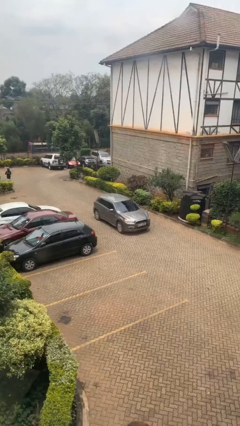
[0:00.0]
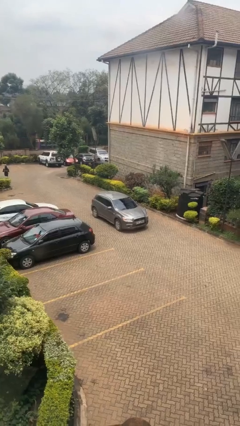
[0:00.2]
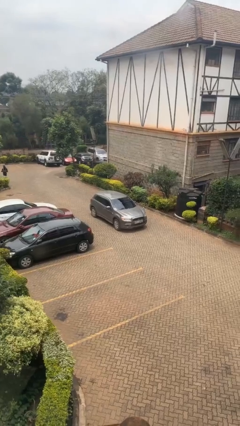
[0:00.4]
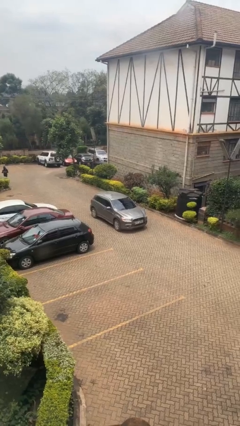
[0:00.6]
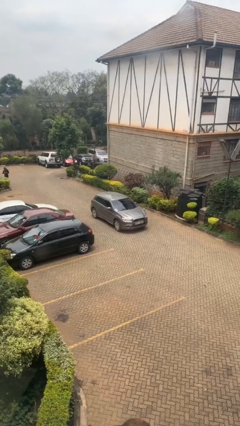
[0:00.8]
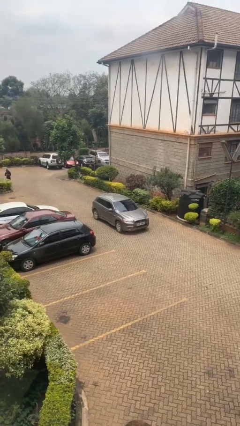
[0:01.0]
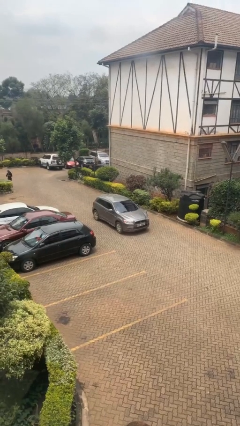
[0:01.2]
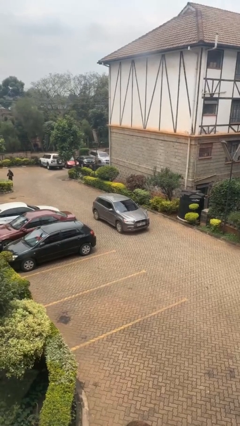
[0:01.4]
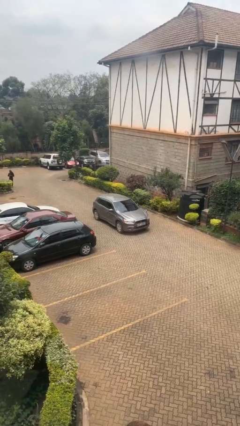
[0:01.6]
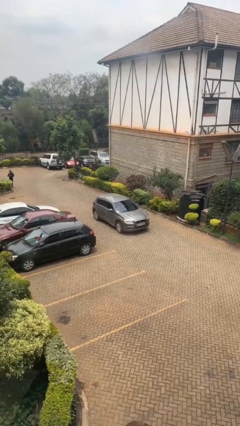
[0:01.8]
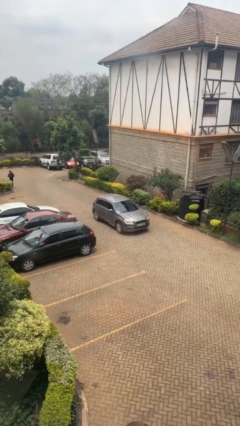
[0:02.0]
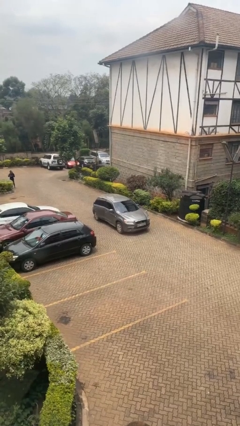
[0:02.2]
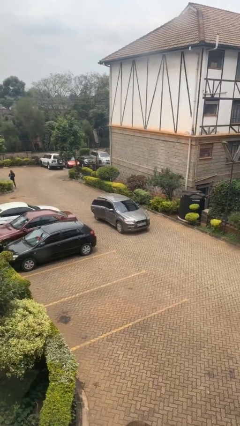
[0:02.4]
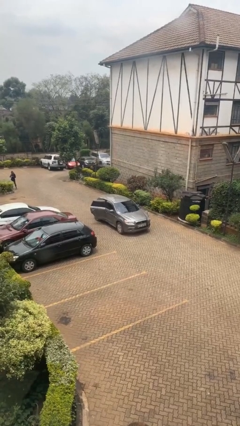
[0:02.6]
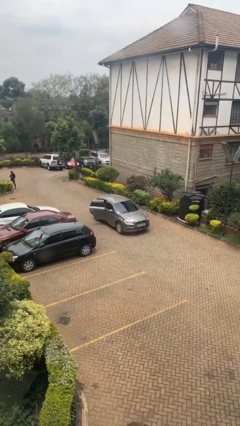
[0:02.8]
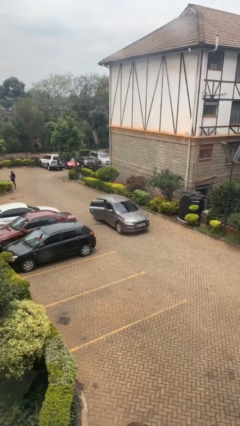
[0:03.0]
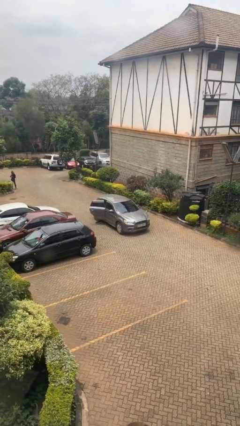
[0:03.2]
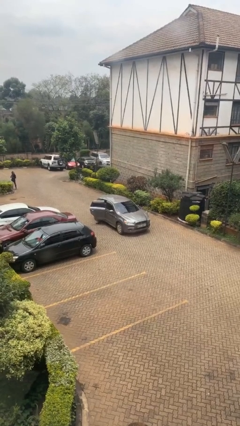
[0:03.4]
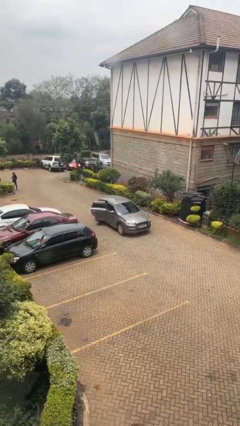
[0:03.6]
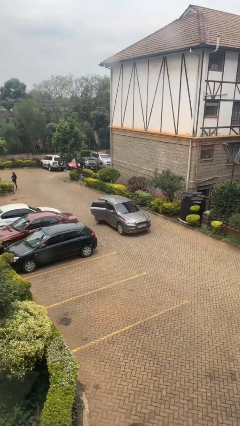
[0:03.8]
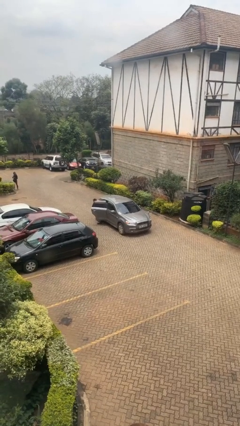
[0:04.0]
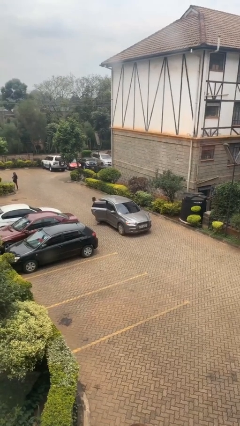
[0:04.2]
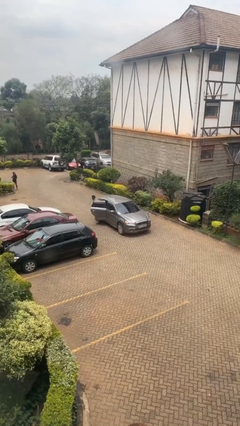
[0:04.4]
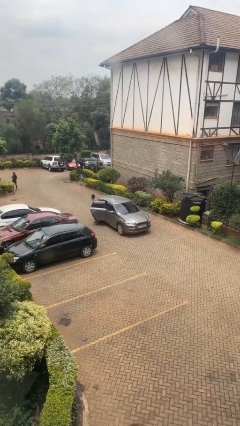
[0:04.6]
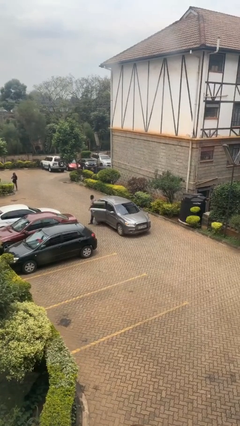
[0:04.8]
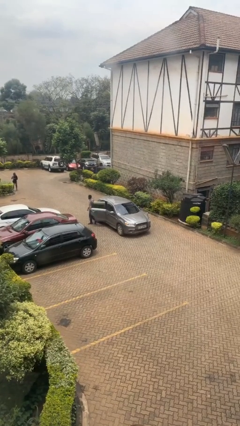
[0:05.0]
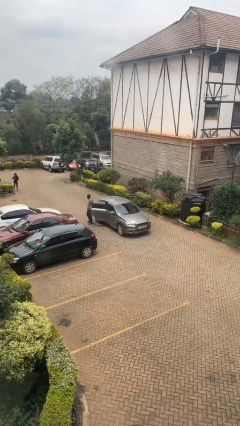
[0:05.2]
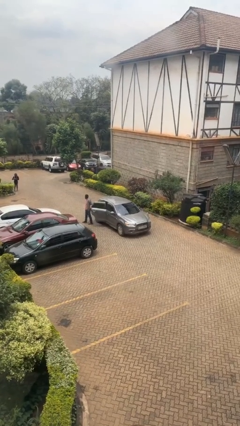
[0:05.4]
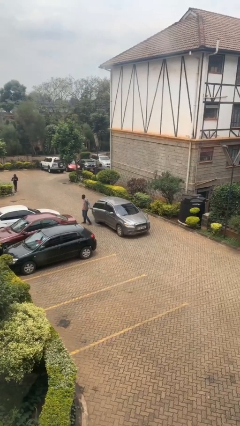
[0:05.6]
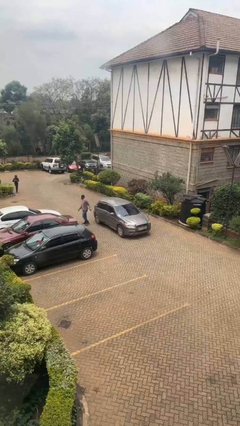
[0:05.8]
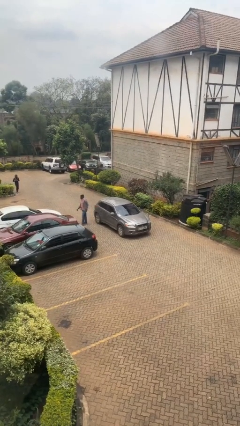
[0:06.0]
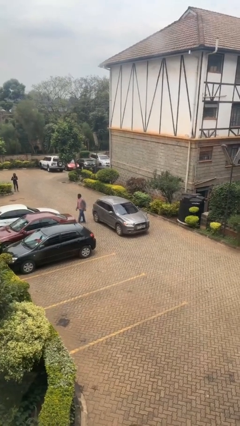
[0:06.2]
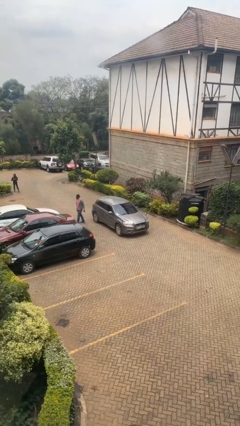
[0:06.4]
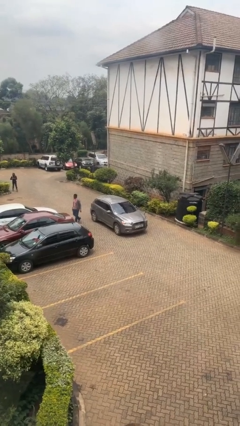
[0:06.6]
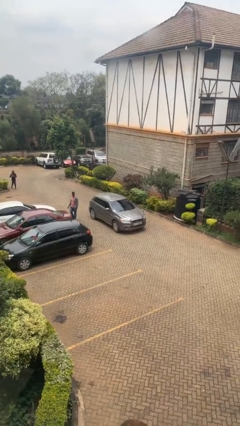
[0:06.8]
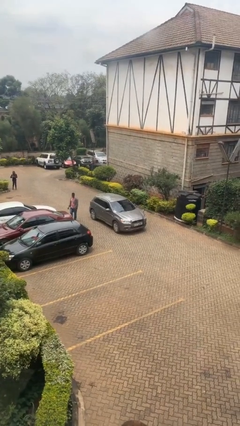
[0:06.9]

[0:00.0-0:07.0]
car drops off person

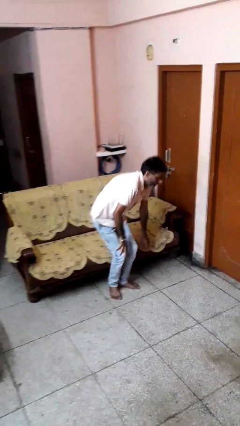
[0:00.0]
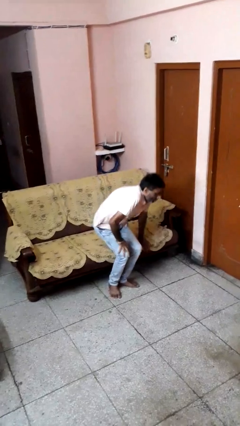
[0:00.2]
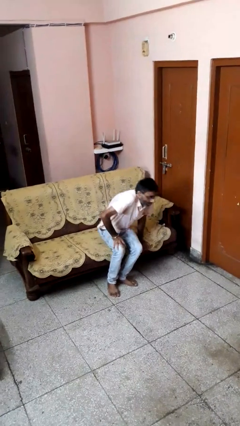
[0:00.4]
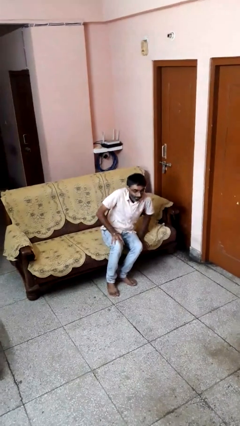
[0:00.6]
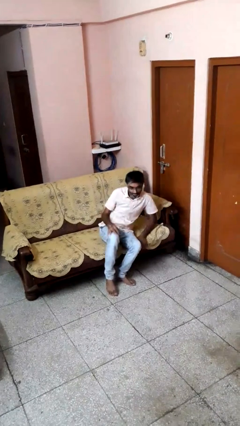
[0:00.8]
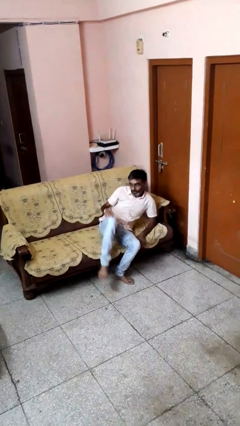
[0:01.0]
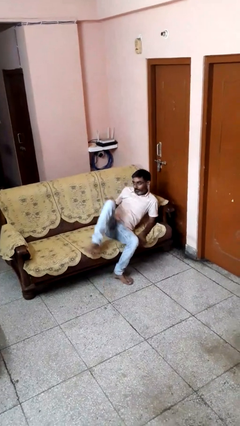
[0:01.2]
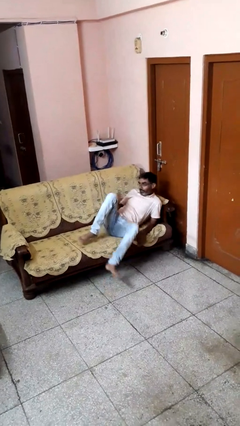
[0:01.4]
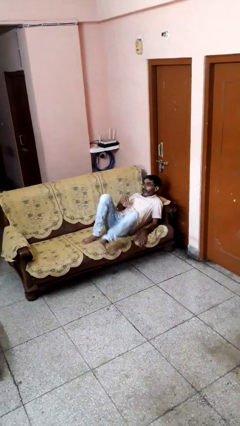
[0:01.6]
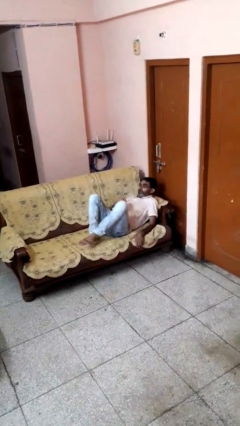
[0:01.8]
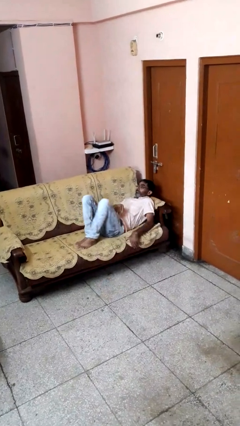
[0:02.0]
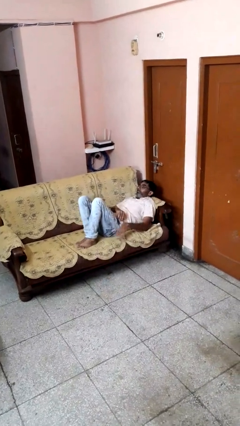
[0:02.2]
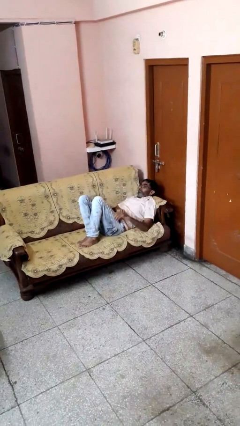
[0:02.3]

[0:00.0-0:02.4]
person lies down on couch

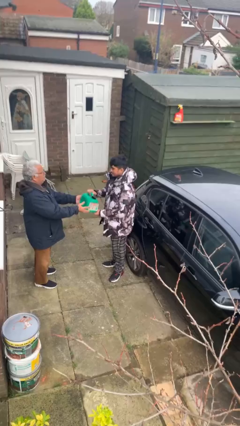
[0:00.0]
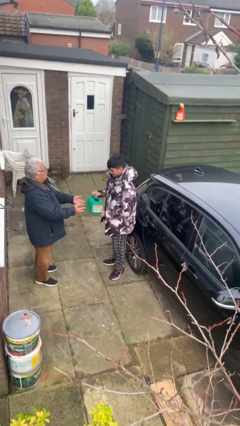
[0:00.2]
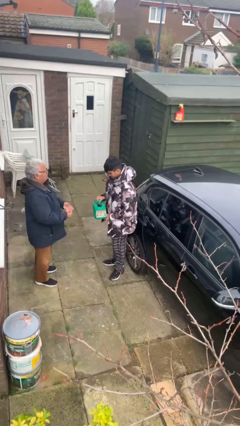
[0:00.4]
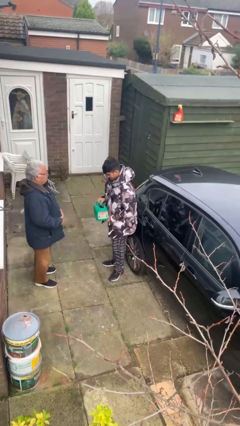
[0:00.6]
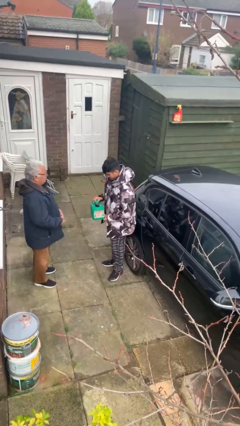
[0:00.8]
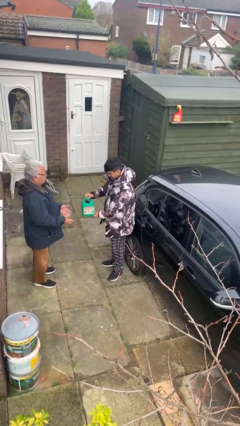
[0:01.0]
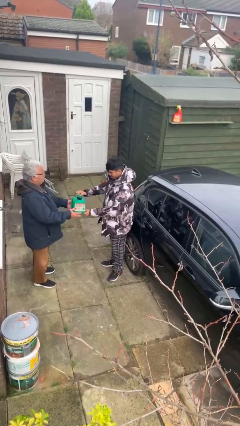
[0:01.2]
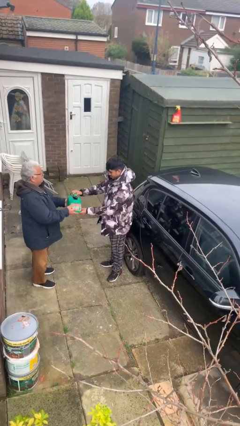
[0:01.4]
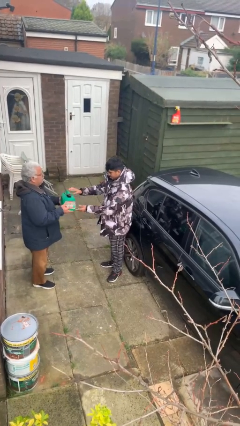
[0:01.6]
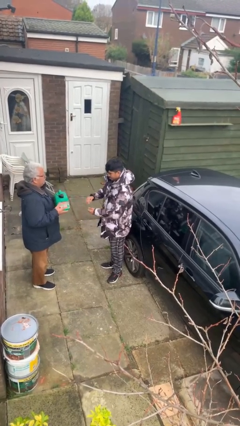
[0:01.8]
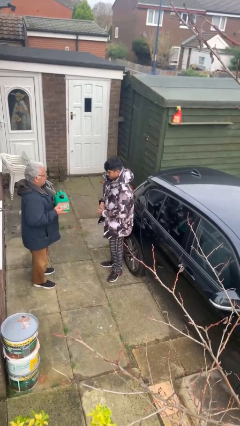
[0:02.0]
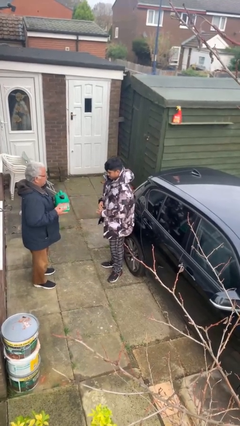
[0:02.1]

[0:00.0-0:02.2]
person transfers object to person

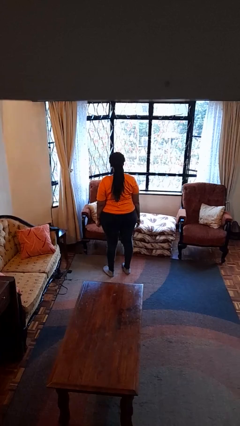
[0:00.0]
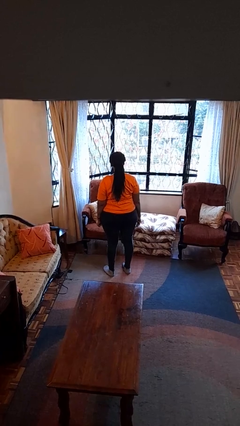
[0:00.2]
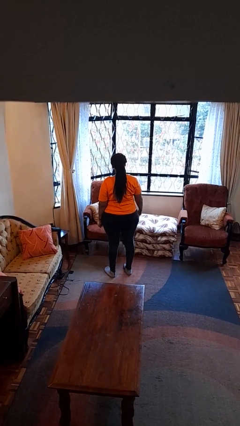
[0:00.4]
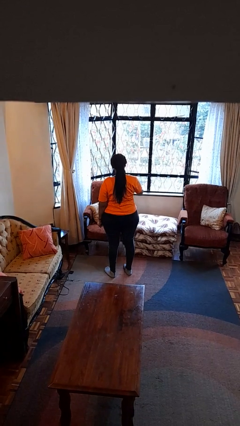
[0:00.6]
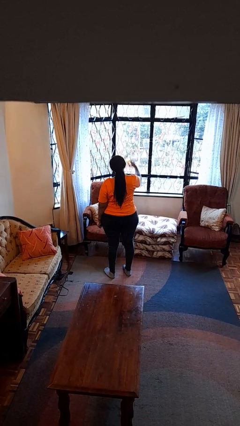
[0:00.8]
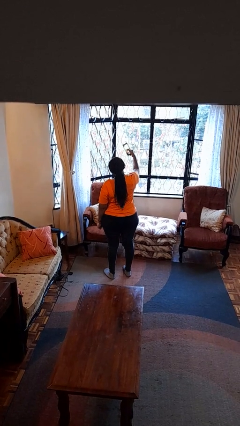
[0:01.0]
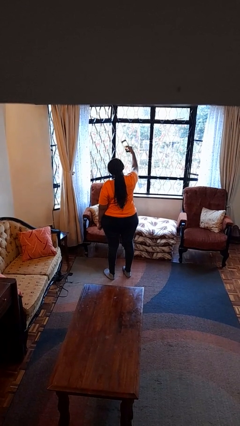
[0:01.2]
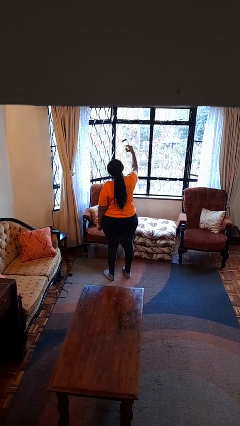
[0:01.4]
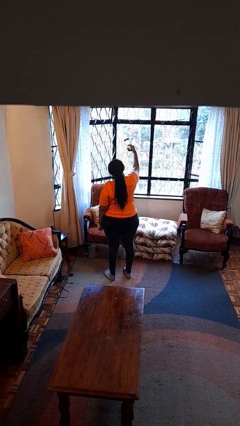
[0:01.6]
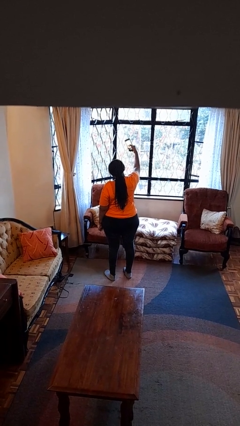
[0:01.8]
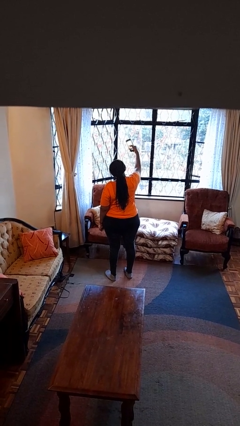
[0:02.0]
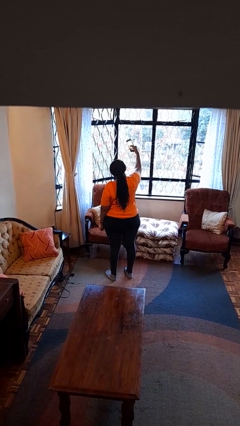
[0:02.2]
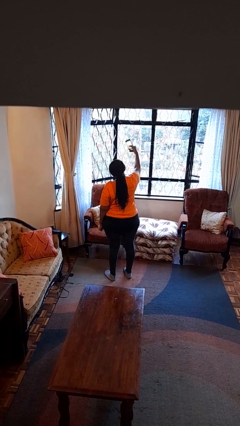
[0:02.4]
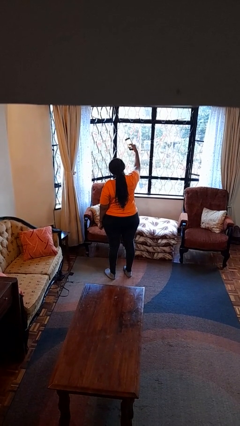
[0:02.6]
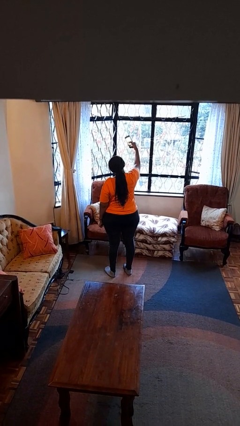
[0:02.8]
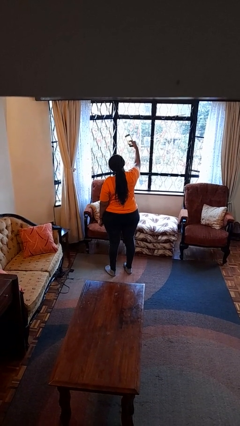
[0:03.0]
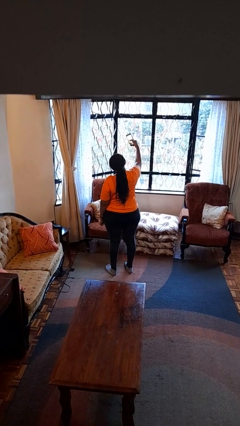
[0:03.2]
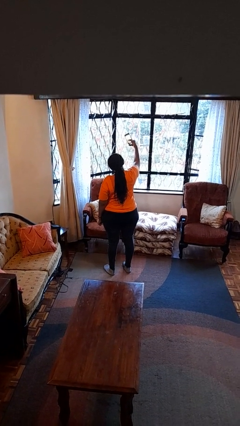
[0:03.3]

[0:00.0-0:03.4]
person takes selfie

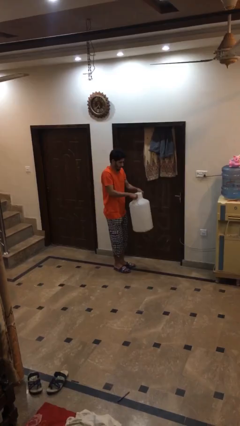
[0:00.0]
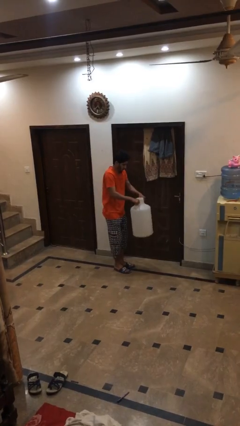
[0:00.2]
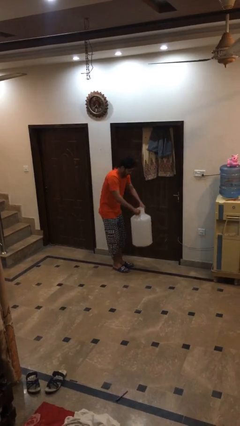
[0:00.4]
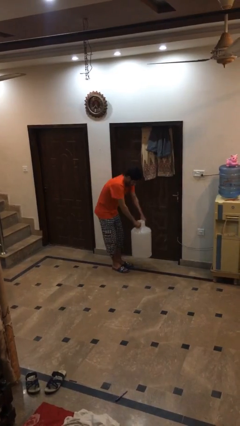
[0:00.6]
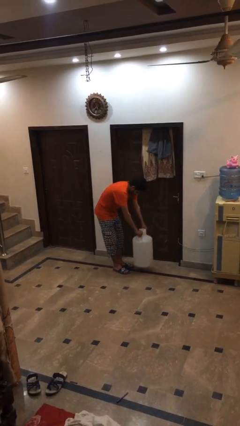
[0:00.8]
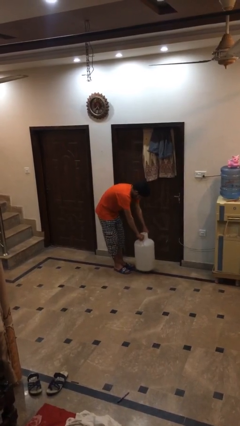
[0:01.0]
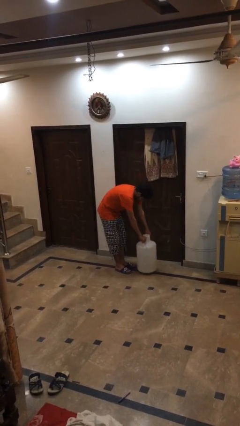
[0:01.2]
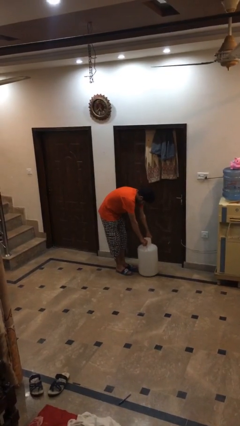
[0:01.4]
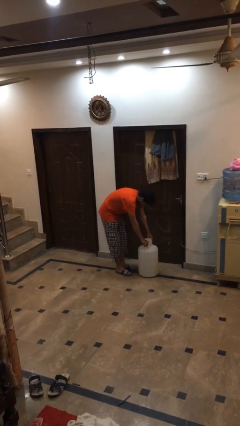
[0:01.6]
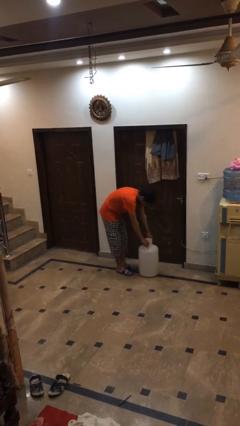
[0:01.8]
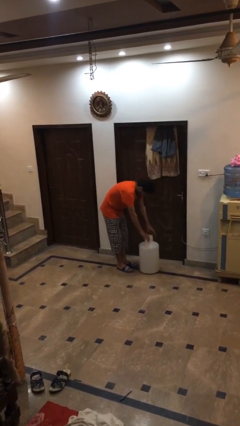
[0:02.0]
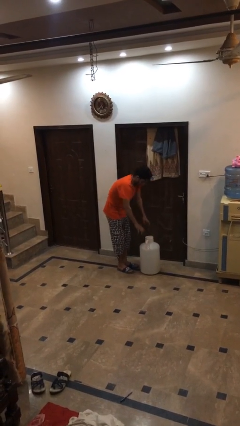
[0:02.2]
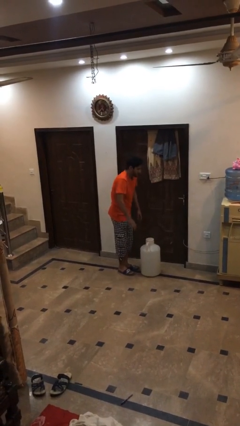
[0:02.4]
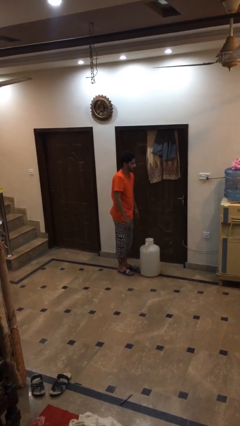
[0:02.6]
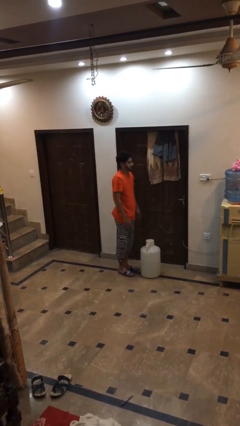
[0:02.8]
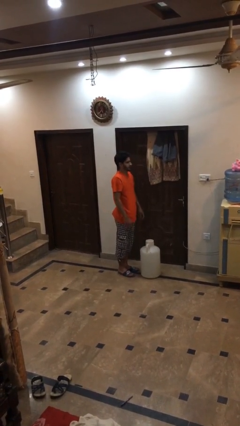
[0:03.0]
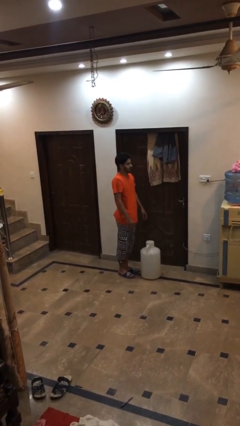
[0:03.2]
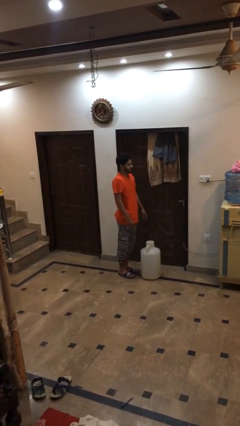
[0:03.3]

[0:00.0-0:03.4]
person puts down object on floor
